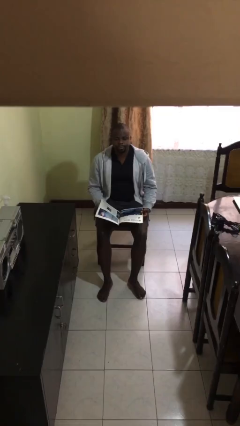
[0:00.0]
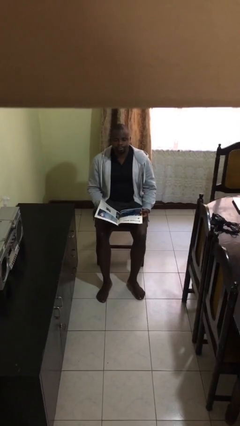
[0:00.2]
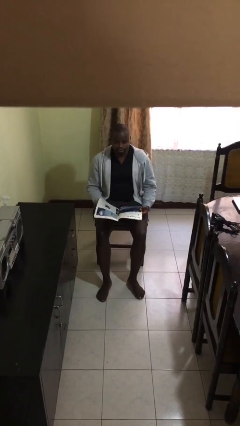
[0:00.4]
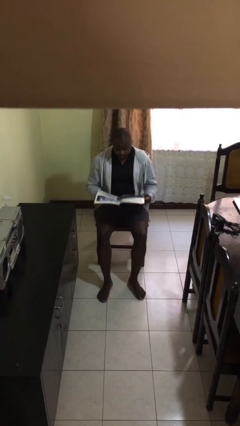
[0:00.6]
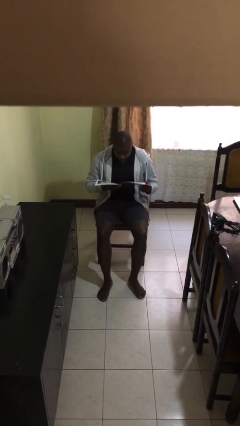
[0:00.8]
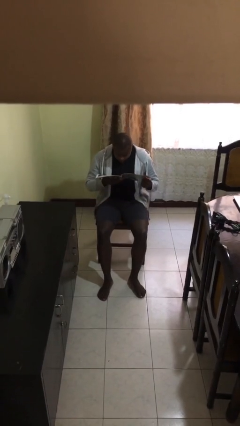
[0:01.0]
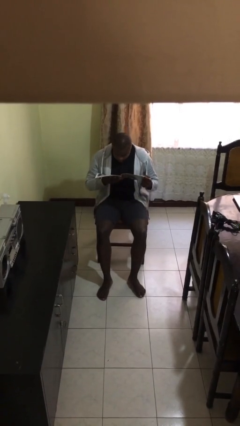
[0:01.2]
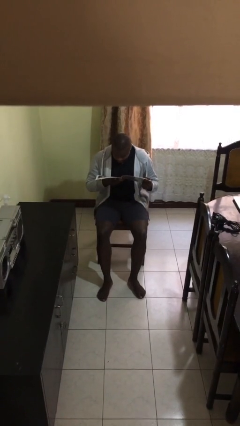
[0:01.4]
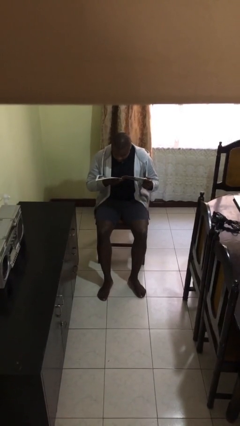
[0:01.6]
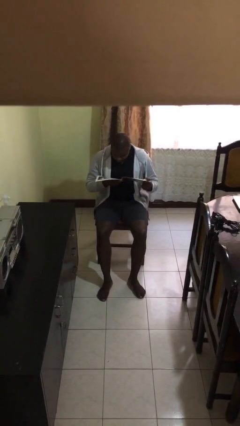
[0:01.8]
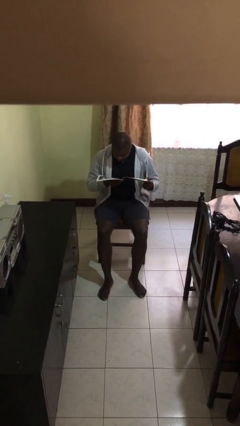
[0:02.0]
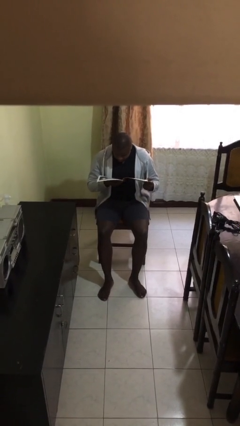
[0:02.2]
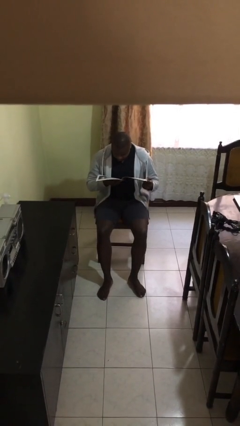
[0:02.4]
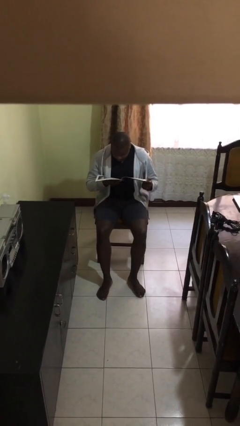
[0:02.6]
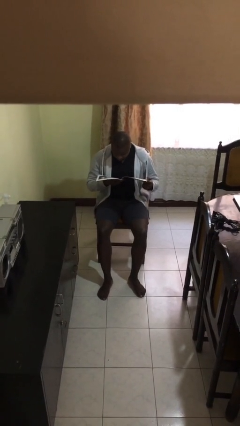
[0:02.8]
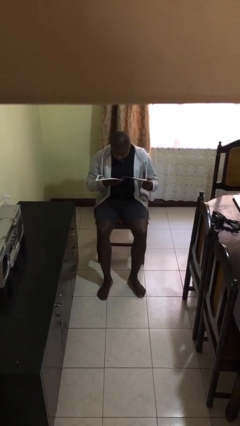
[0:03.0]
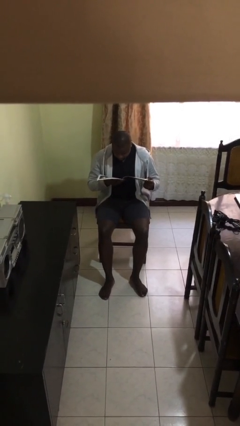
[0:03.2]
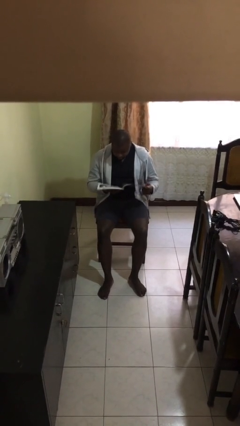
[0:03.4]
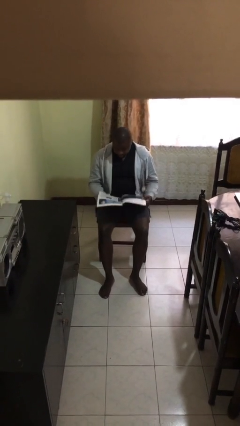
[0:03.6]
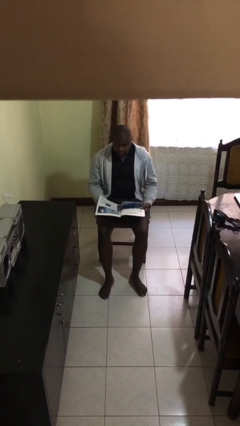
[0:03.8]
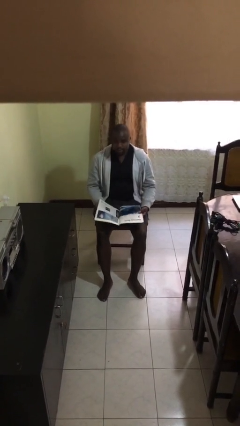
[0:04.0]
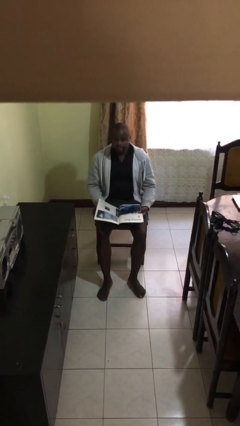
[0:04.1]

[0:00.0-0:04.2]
person reads document

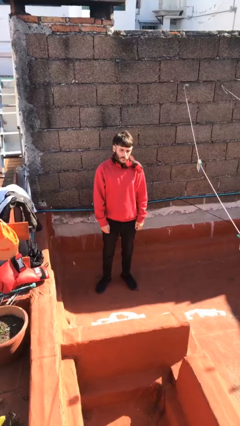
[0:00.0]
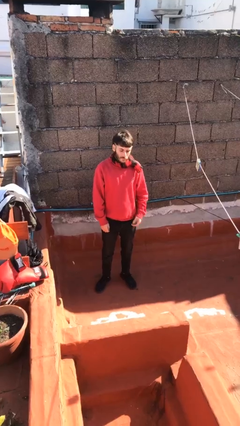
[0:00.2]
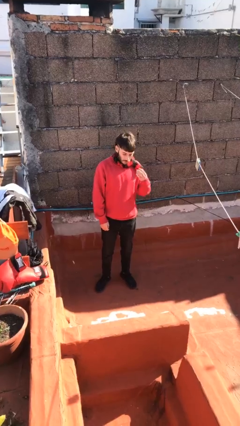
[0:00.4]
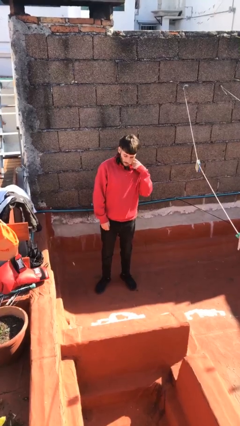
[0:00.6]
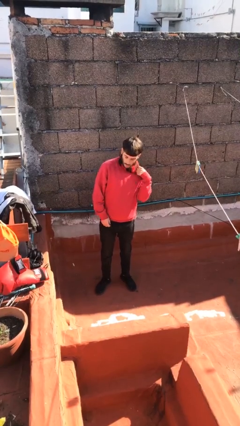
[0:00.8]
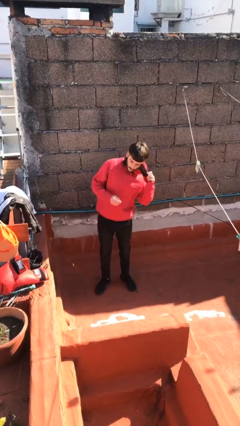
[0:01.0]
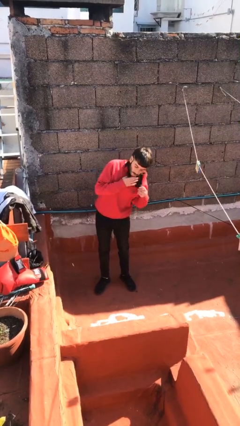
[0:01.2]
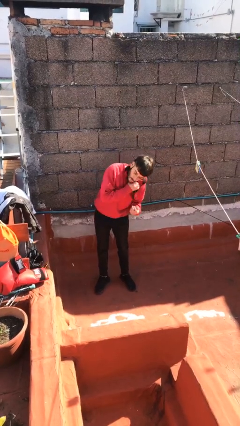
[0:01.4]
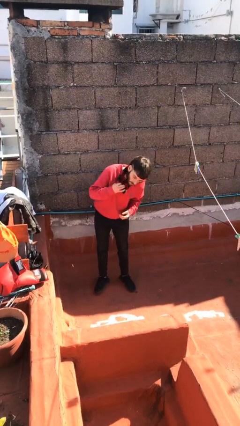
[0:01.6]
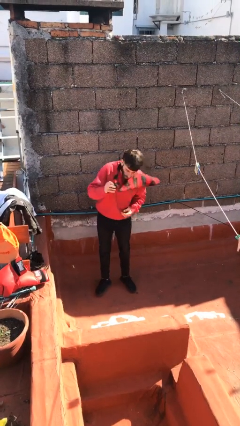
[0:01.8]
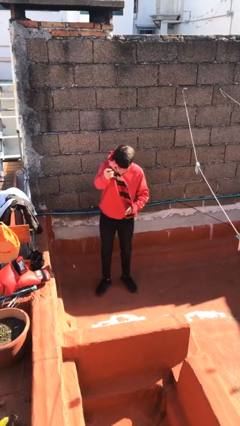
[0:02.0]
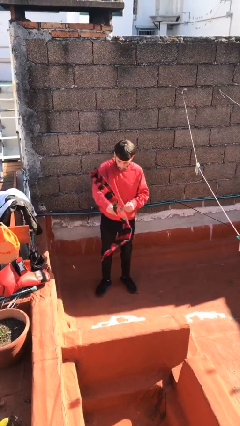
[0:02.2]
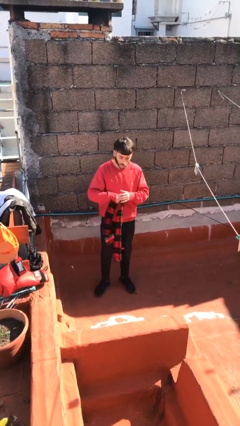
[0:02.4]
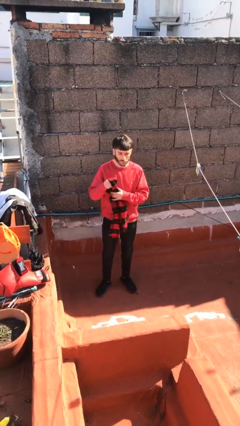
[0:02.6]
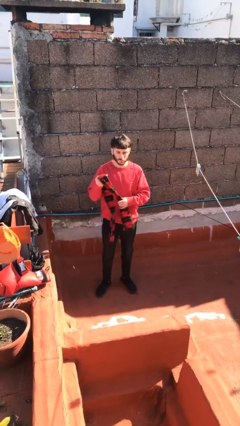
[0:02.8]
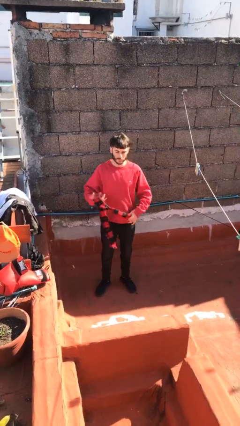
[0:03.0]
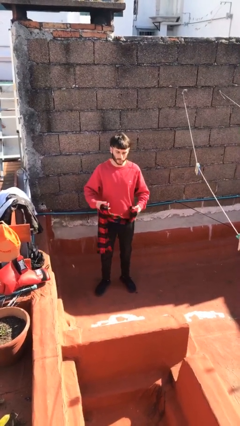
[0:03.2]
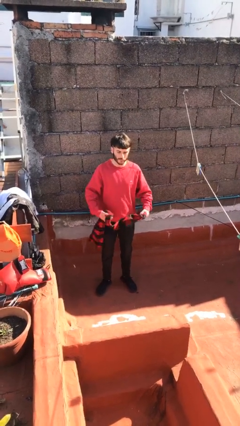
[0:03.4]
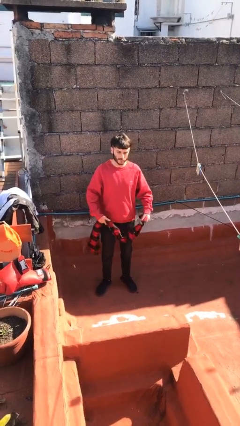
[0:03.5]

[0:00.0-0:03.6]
person takes off scarf

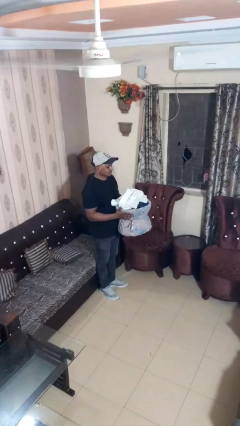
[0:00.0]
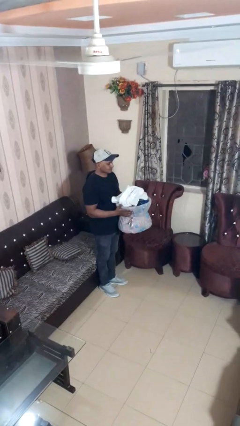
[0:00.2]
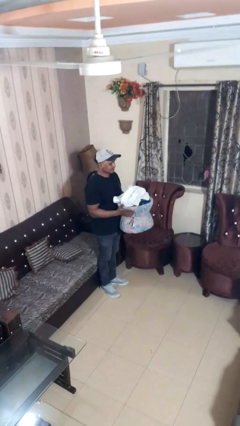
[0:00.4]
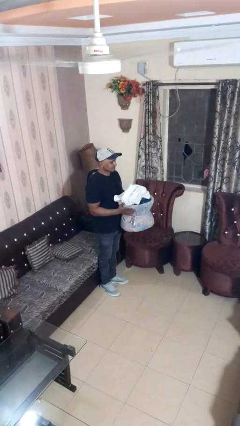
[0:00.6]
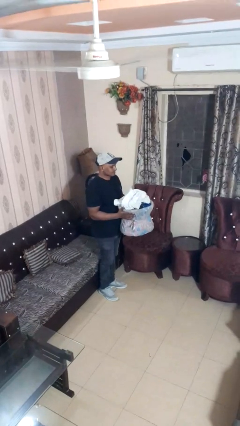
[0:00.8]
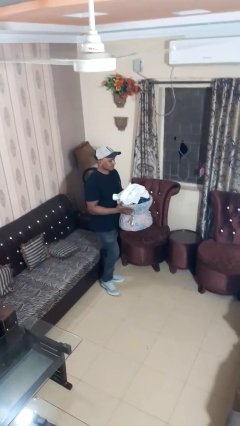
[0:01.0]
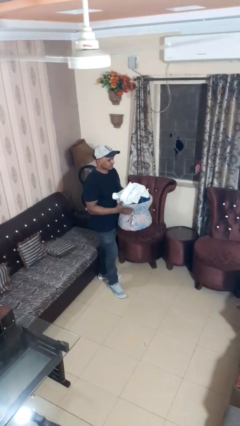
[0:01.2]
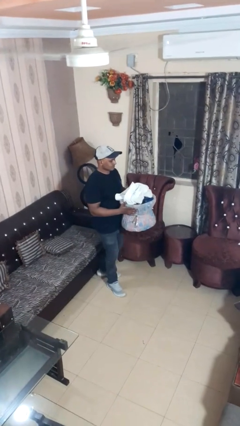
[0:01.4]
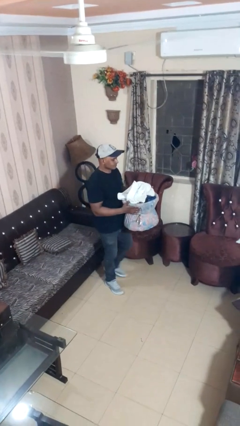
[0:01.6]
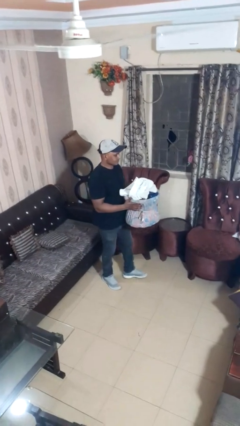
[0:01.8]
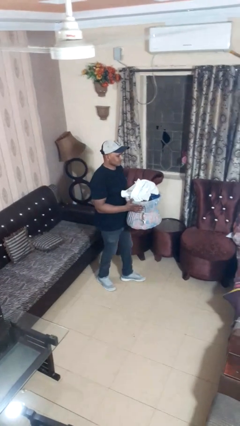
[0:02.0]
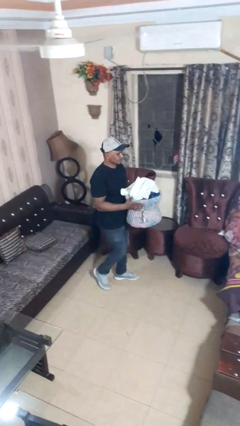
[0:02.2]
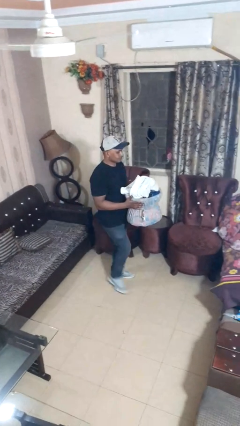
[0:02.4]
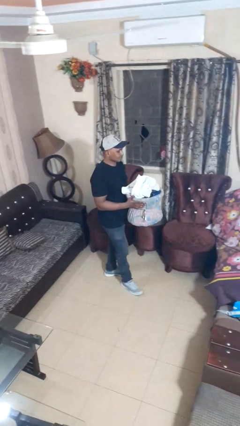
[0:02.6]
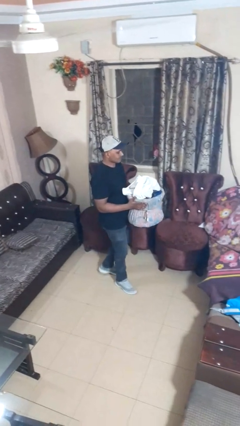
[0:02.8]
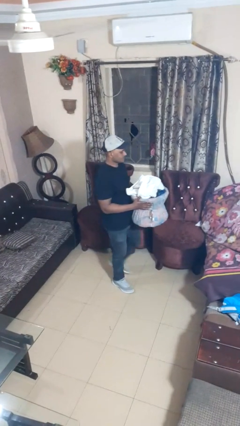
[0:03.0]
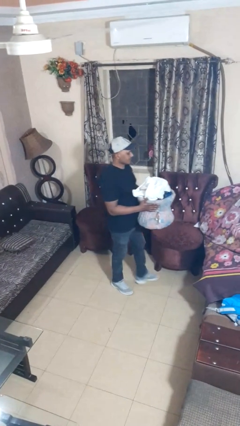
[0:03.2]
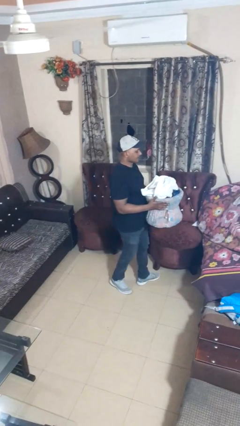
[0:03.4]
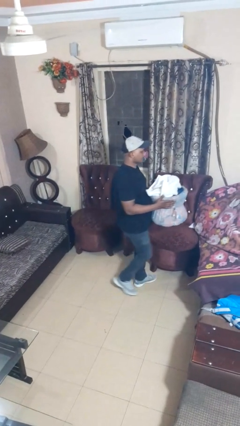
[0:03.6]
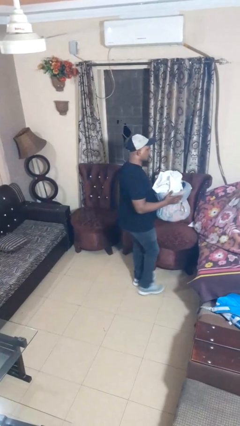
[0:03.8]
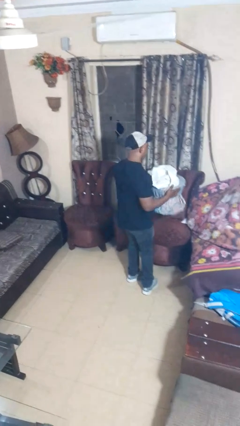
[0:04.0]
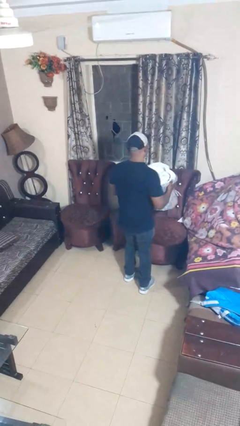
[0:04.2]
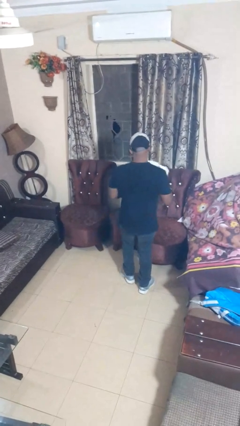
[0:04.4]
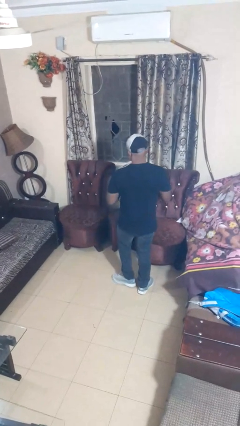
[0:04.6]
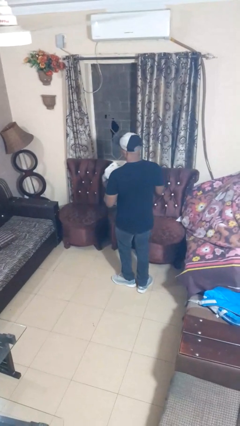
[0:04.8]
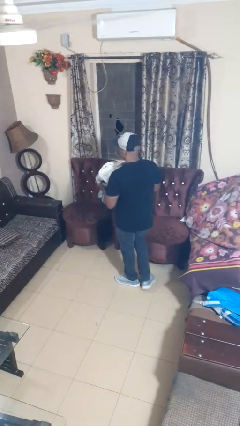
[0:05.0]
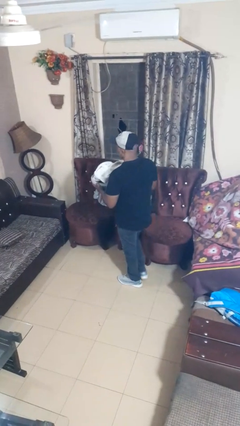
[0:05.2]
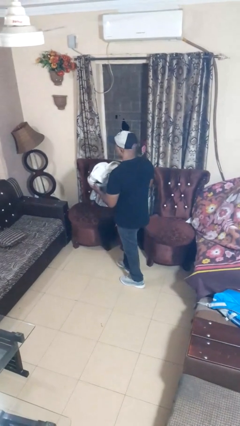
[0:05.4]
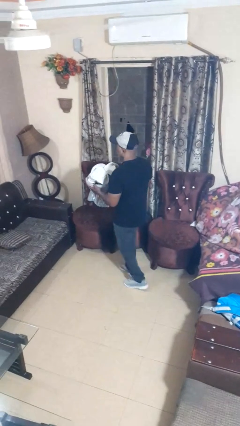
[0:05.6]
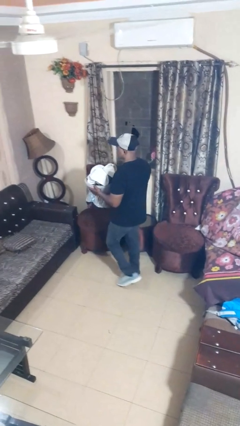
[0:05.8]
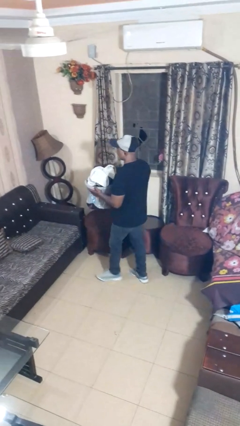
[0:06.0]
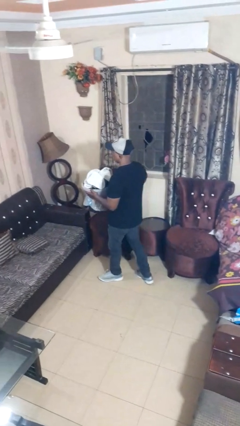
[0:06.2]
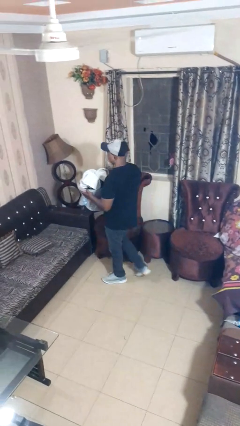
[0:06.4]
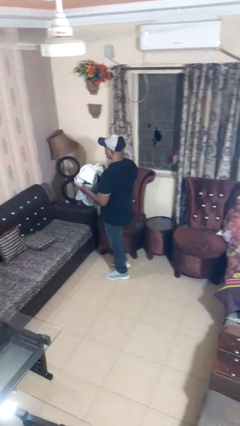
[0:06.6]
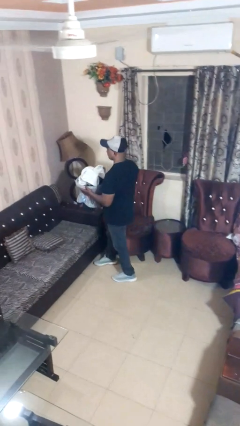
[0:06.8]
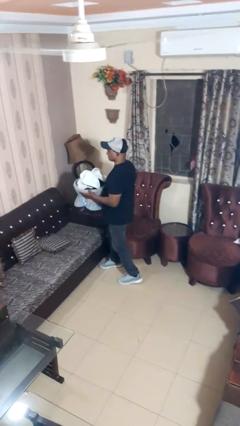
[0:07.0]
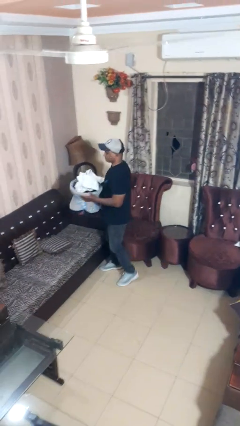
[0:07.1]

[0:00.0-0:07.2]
person carries laundry basket

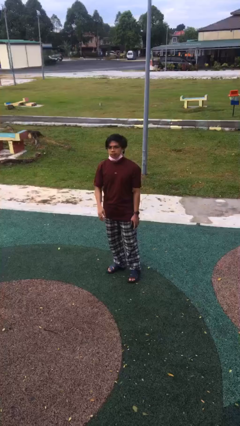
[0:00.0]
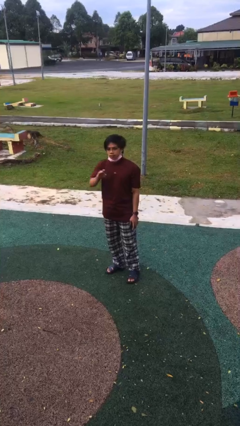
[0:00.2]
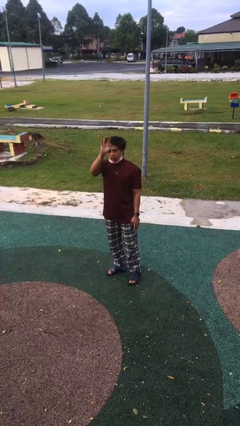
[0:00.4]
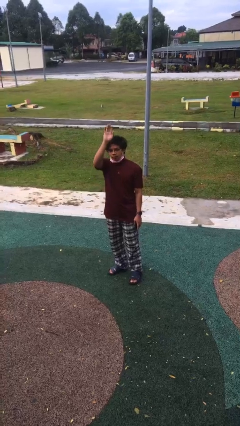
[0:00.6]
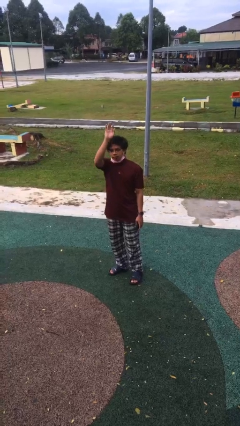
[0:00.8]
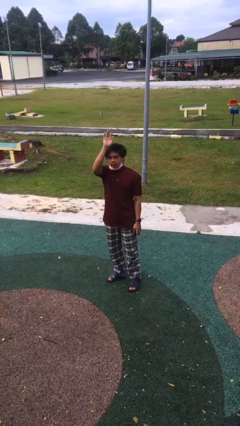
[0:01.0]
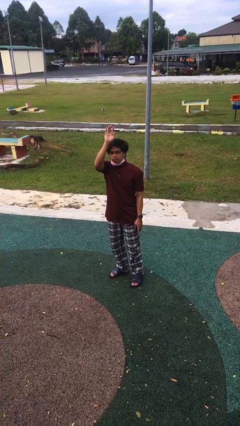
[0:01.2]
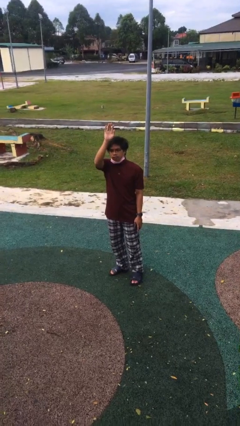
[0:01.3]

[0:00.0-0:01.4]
person gestures raise hand

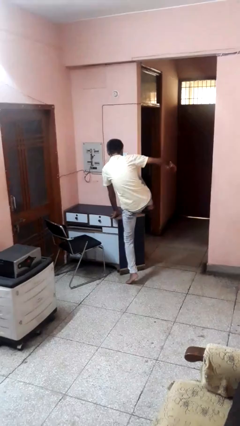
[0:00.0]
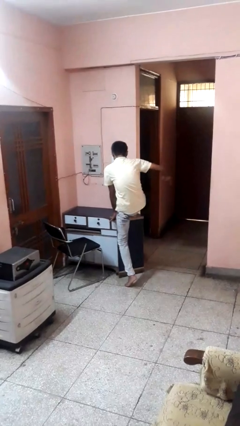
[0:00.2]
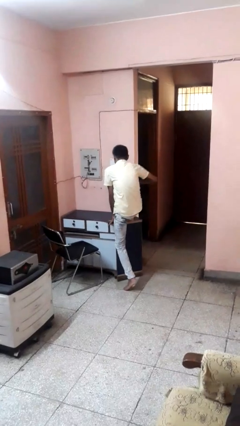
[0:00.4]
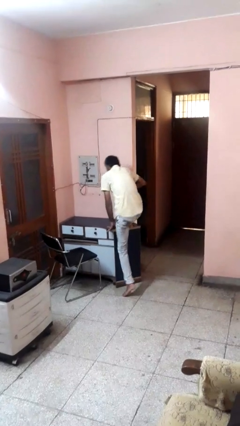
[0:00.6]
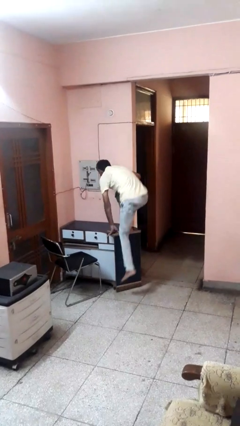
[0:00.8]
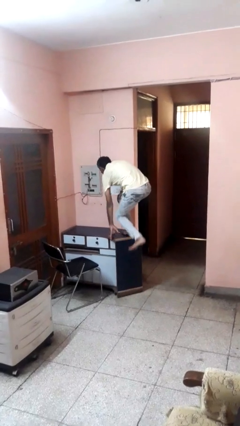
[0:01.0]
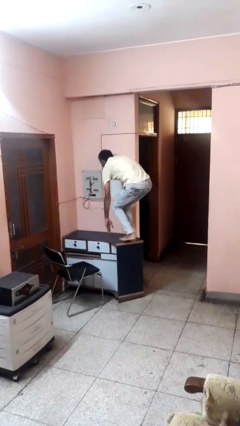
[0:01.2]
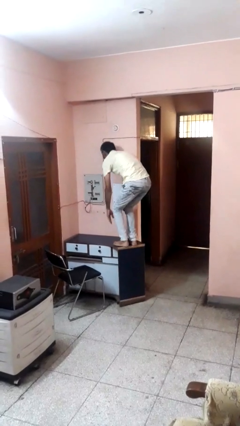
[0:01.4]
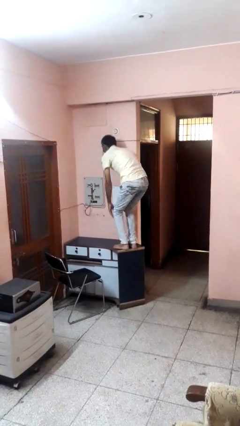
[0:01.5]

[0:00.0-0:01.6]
person climbs on table
